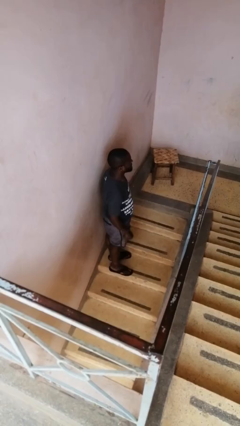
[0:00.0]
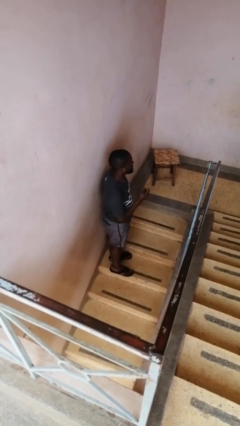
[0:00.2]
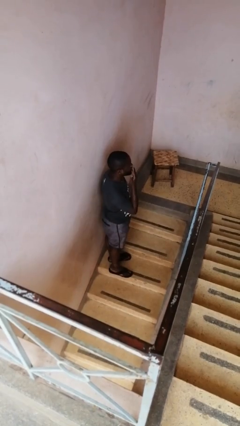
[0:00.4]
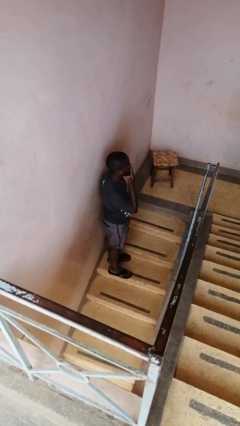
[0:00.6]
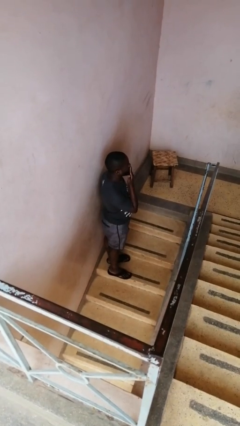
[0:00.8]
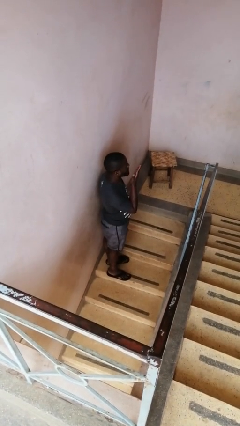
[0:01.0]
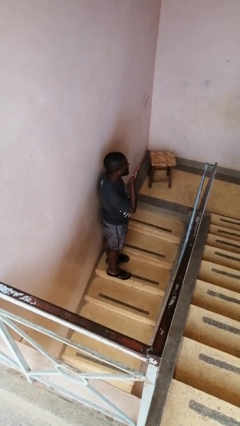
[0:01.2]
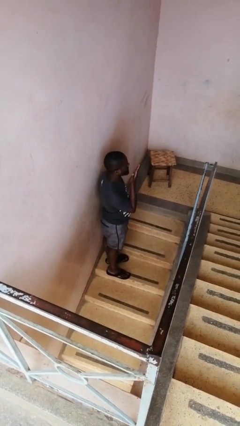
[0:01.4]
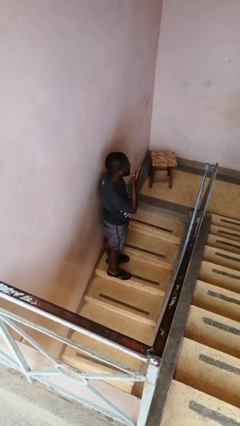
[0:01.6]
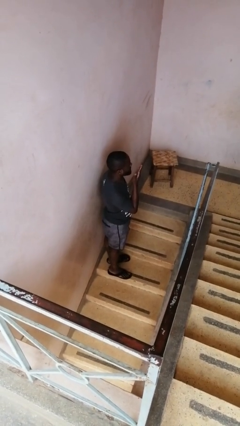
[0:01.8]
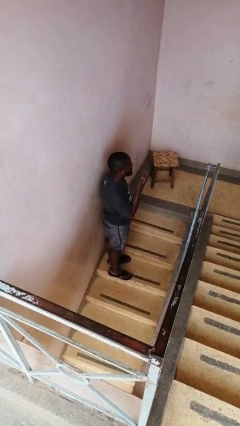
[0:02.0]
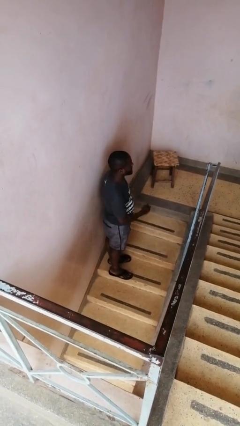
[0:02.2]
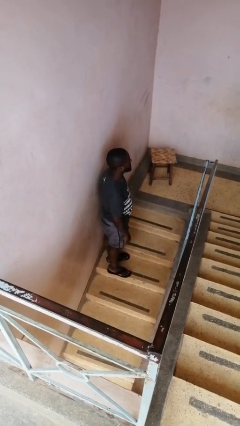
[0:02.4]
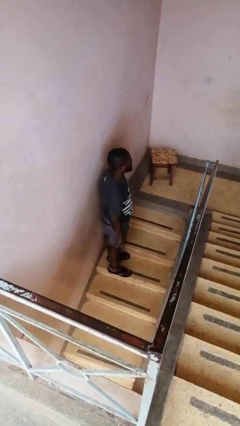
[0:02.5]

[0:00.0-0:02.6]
person gestures blow kiss

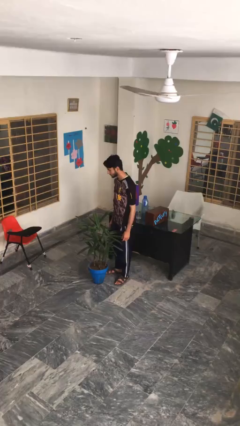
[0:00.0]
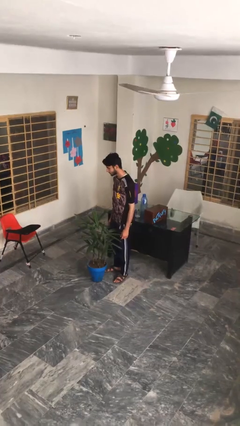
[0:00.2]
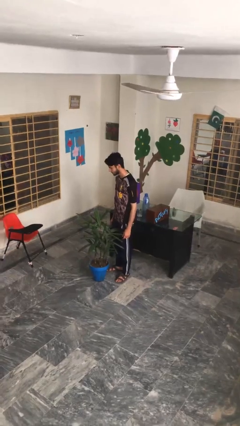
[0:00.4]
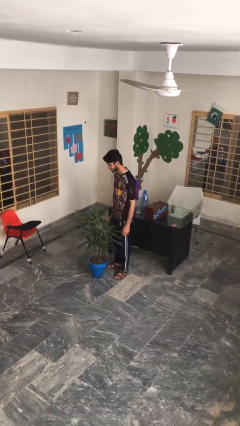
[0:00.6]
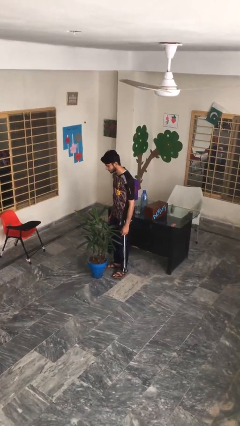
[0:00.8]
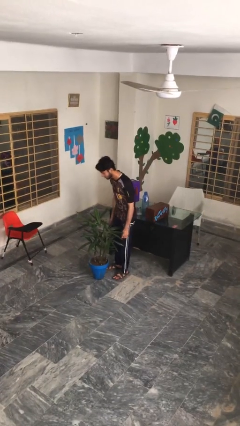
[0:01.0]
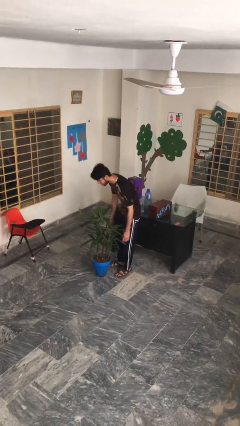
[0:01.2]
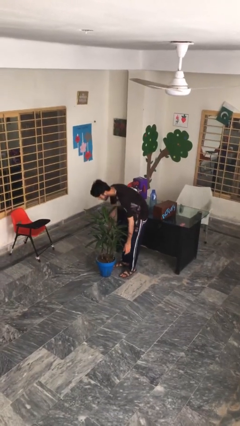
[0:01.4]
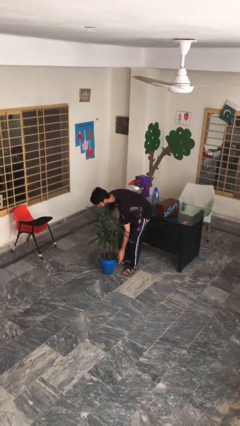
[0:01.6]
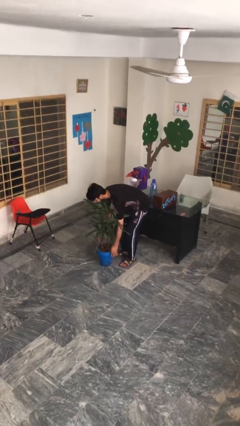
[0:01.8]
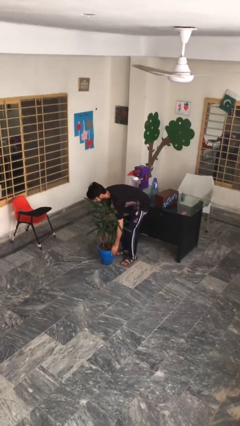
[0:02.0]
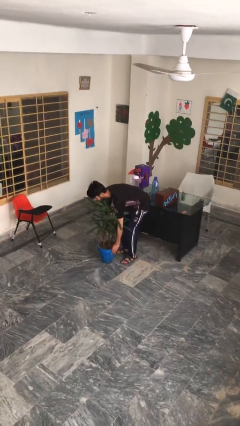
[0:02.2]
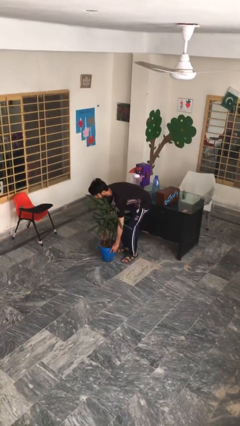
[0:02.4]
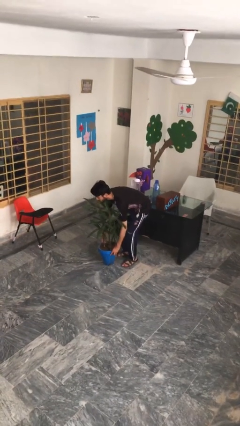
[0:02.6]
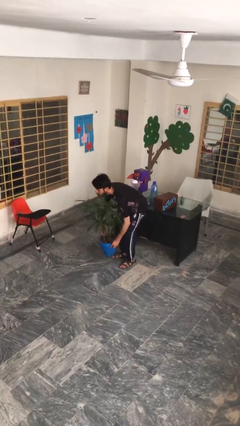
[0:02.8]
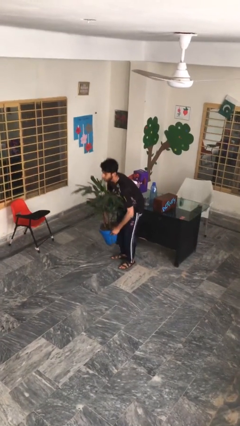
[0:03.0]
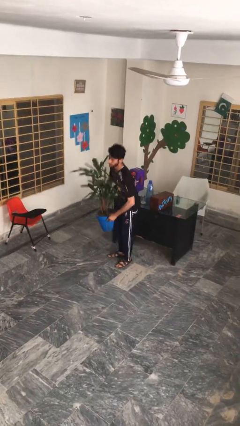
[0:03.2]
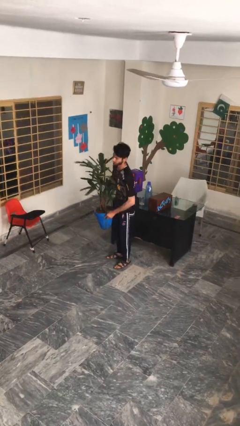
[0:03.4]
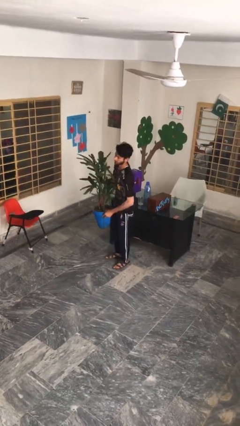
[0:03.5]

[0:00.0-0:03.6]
person picks up object from floor

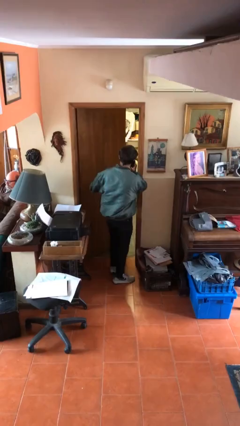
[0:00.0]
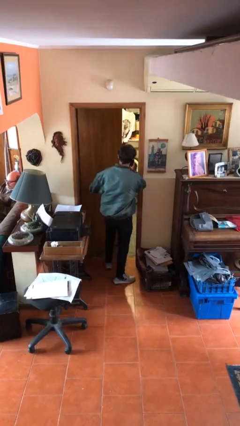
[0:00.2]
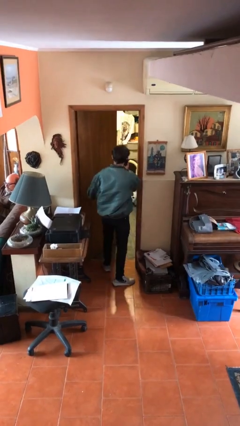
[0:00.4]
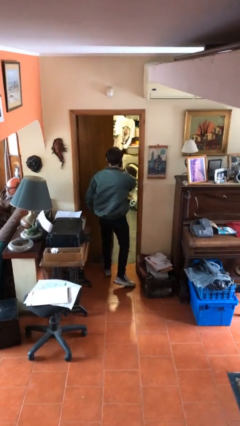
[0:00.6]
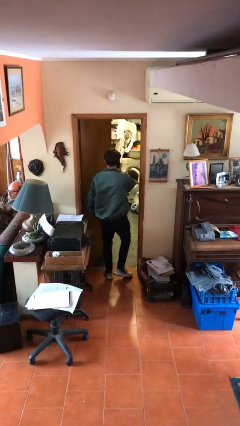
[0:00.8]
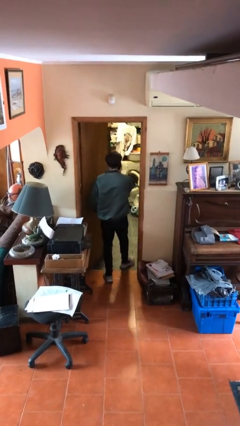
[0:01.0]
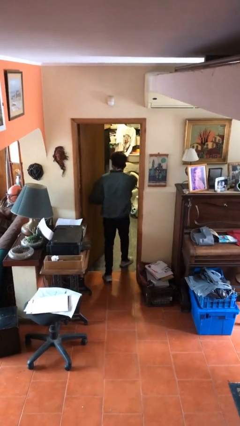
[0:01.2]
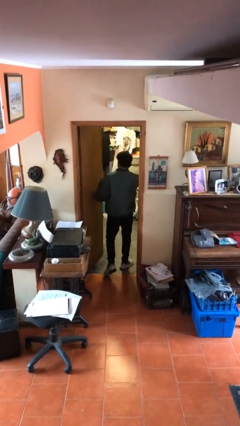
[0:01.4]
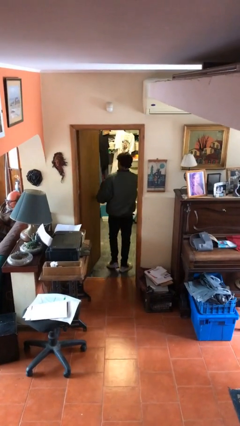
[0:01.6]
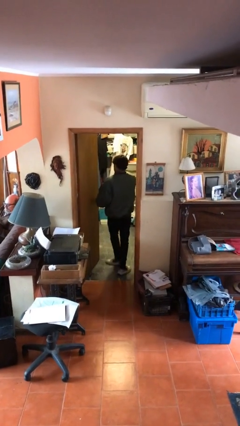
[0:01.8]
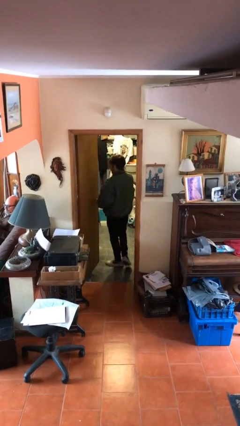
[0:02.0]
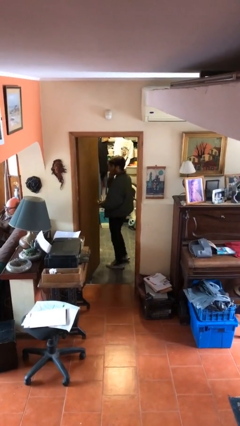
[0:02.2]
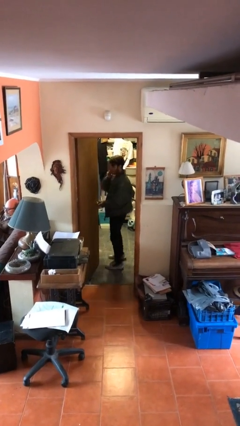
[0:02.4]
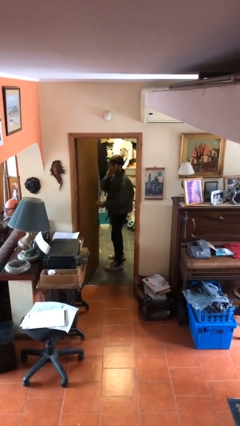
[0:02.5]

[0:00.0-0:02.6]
person exits scene through structure

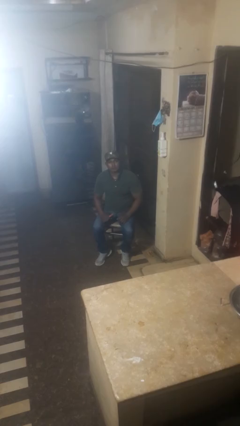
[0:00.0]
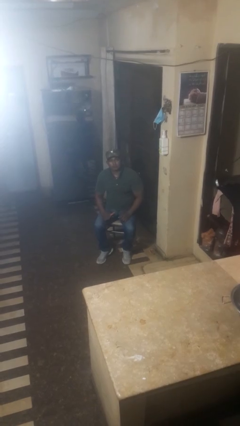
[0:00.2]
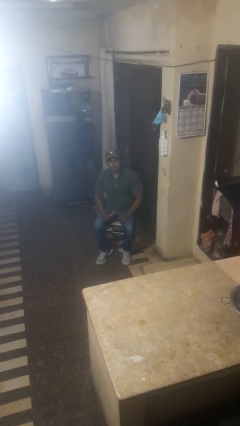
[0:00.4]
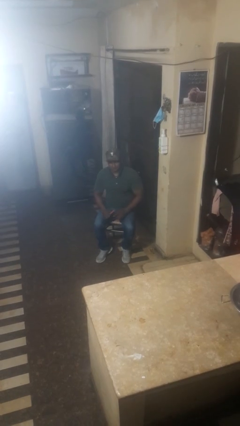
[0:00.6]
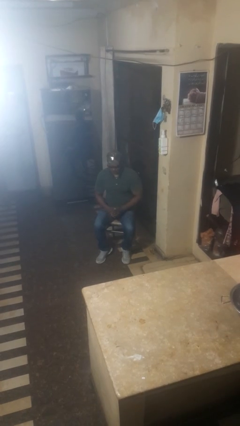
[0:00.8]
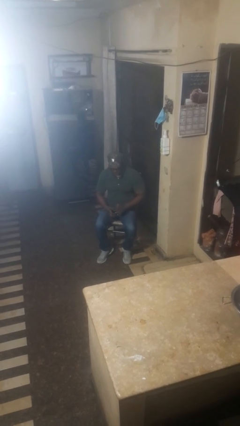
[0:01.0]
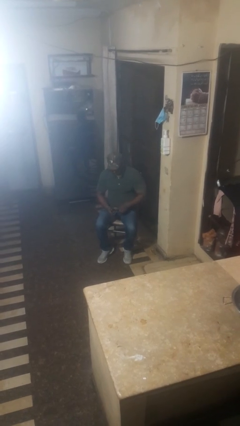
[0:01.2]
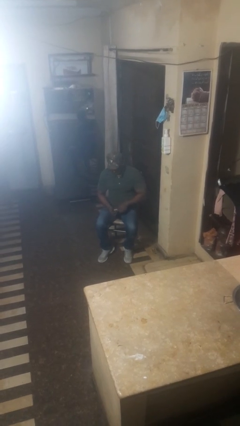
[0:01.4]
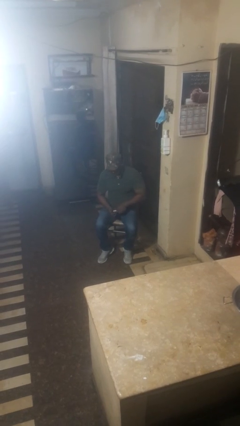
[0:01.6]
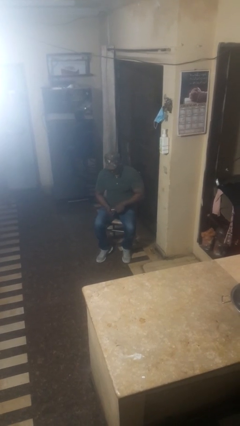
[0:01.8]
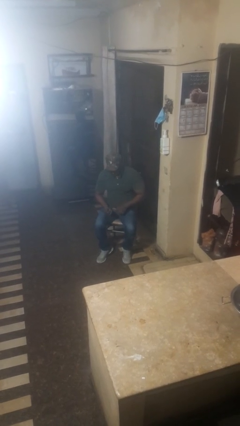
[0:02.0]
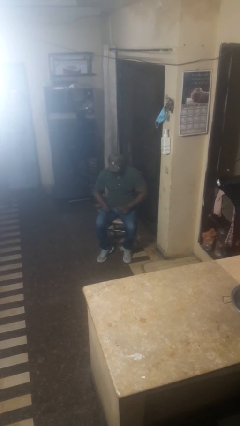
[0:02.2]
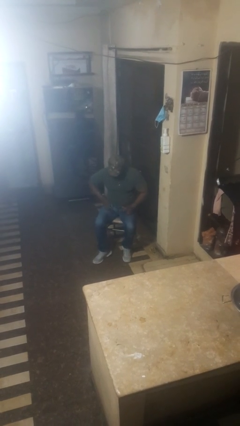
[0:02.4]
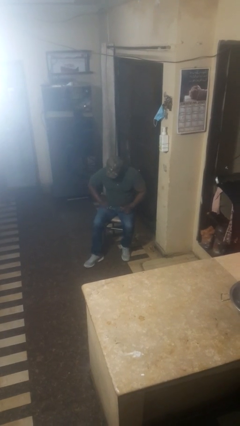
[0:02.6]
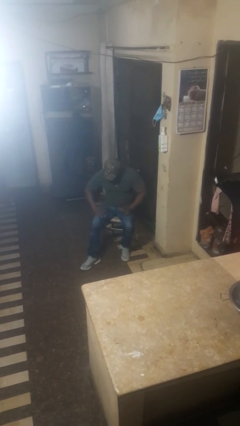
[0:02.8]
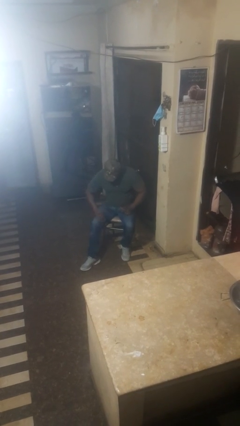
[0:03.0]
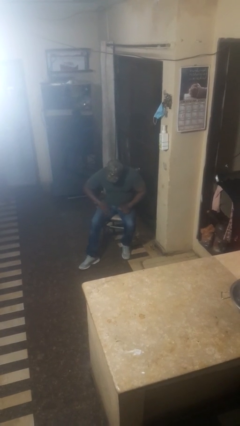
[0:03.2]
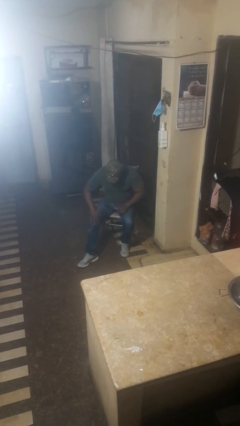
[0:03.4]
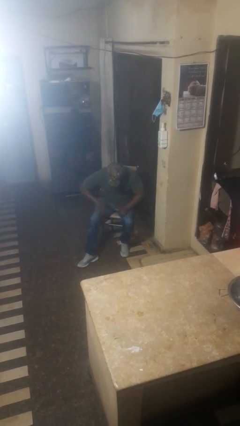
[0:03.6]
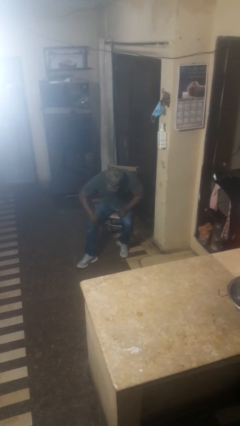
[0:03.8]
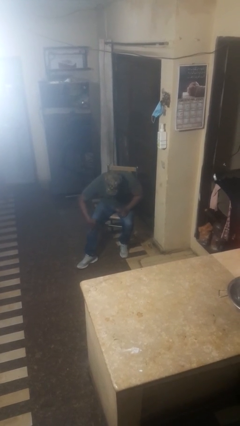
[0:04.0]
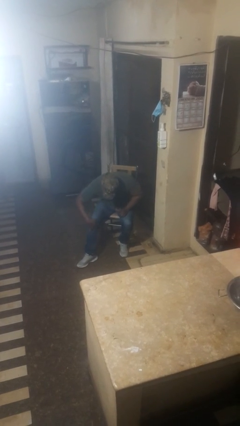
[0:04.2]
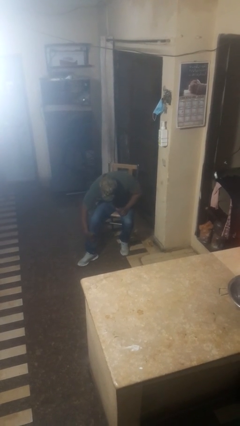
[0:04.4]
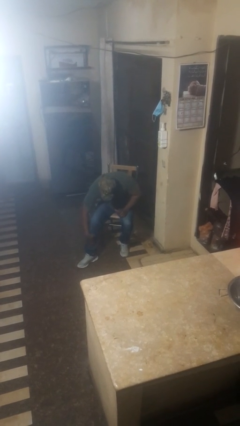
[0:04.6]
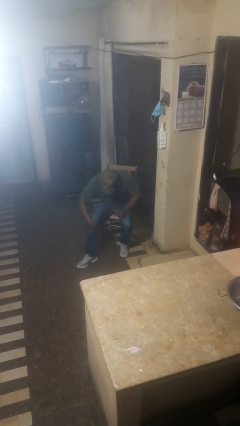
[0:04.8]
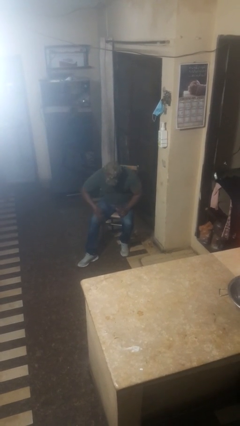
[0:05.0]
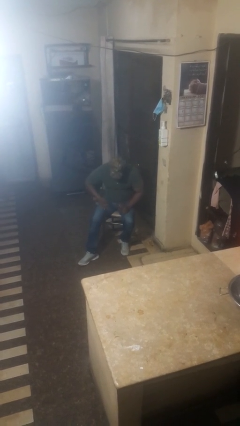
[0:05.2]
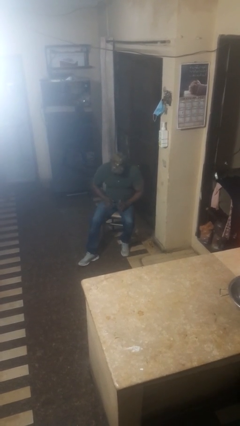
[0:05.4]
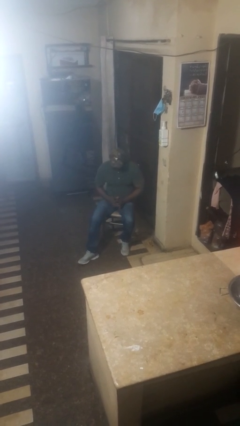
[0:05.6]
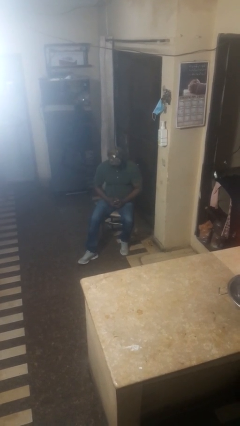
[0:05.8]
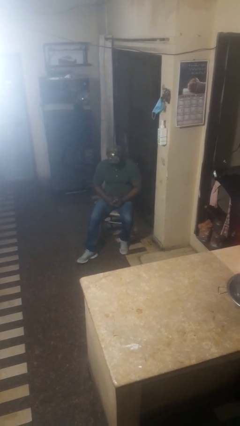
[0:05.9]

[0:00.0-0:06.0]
person applies sunscreen

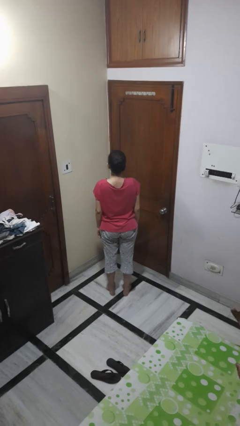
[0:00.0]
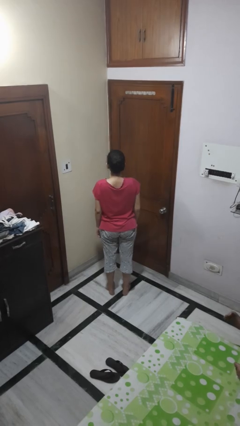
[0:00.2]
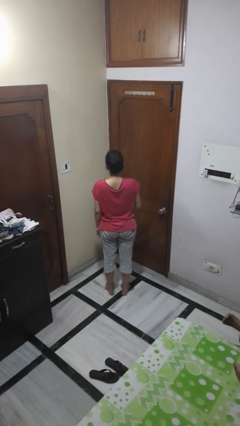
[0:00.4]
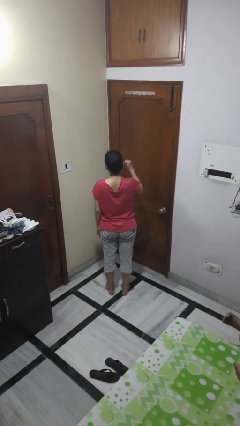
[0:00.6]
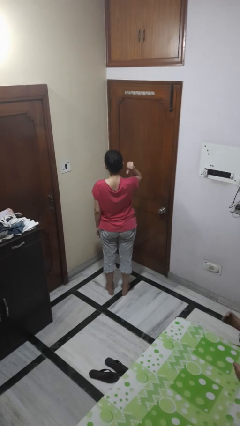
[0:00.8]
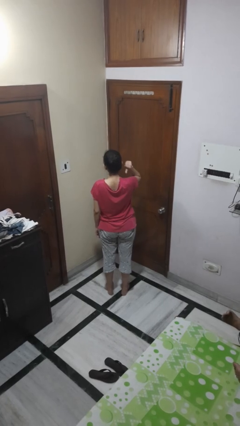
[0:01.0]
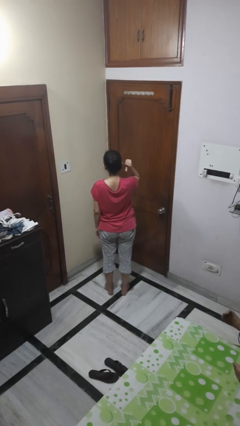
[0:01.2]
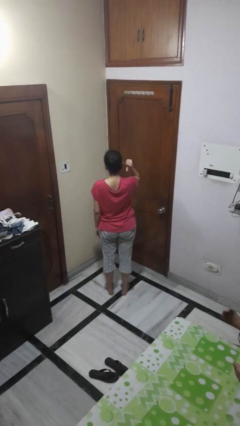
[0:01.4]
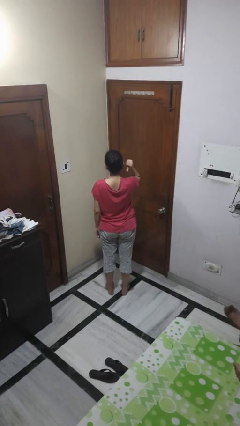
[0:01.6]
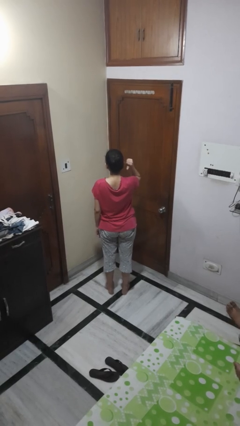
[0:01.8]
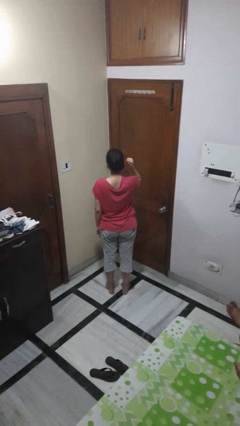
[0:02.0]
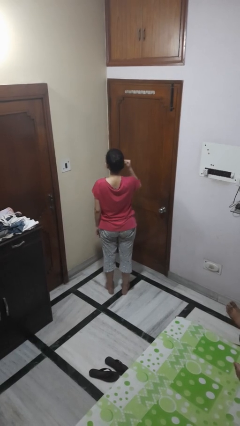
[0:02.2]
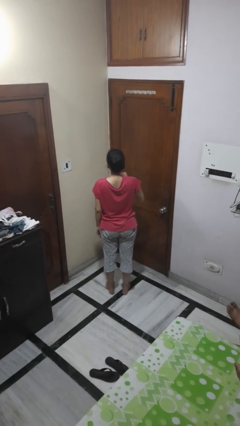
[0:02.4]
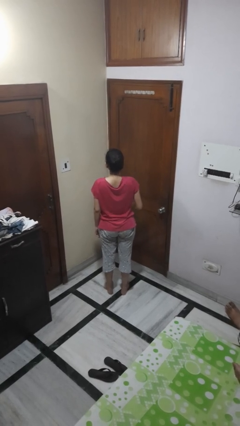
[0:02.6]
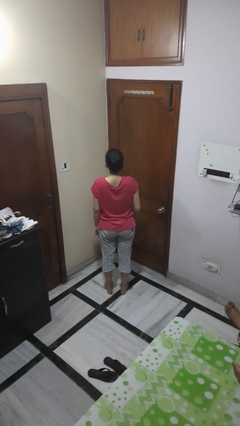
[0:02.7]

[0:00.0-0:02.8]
person gestures behind me
